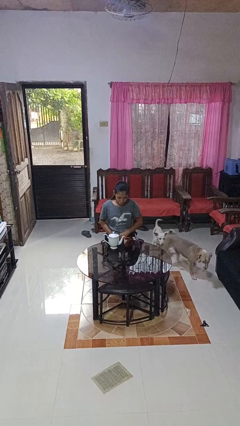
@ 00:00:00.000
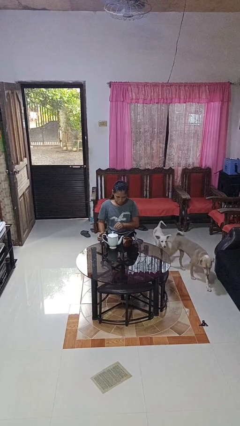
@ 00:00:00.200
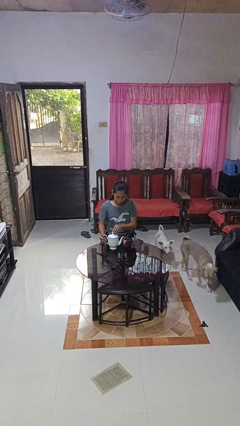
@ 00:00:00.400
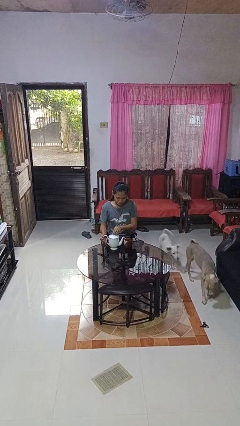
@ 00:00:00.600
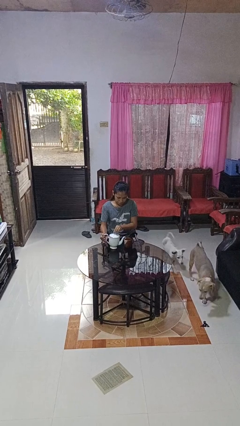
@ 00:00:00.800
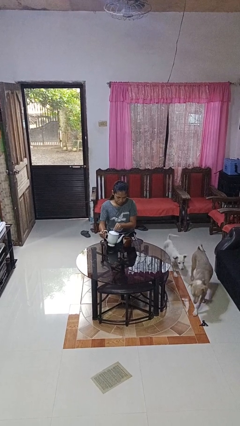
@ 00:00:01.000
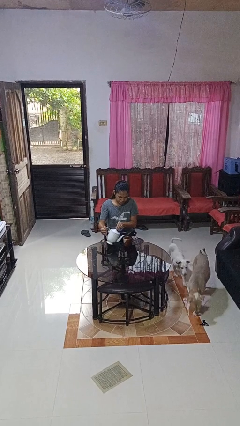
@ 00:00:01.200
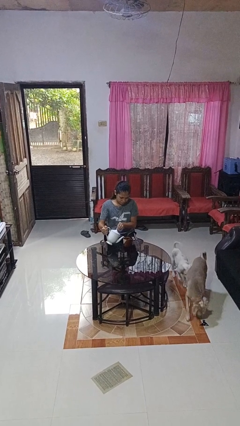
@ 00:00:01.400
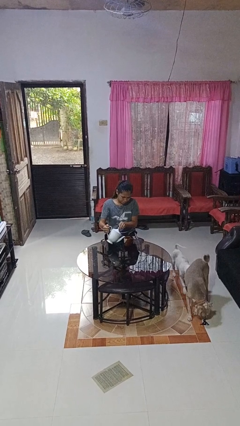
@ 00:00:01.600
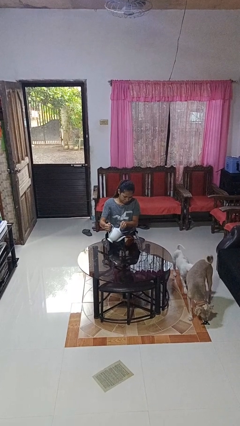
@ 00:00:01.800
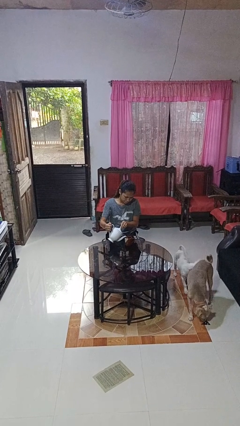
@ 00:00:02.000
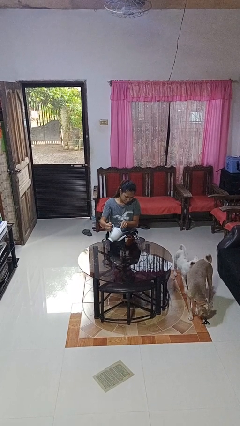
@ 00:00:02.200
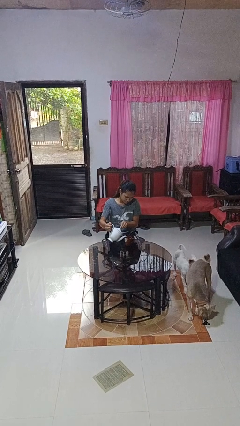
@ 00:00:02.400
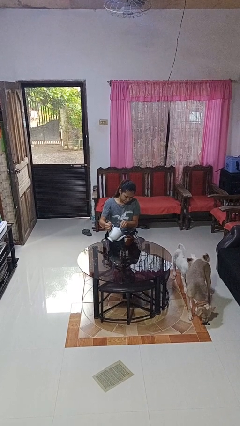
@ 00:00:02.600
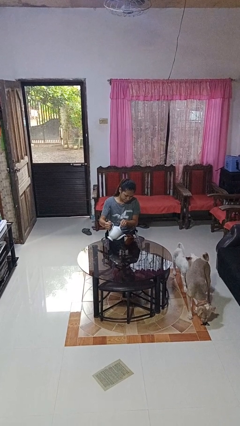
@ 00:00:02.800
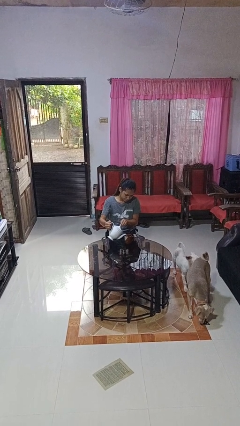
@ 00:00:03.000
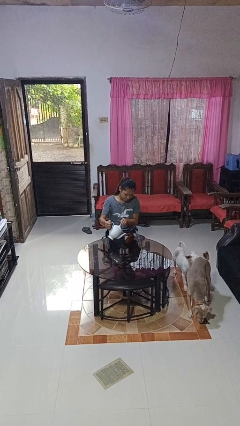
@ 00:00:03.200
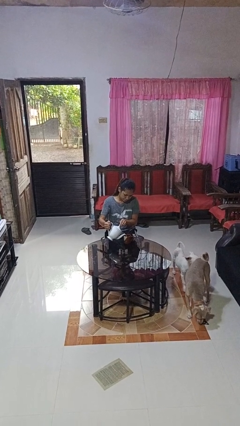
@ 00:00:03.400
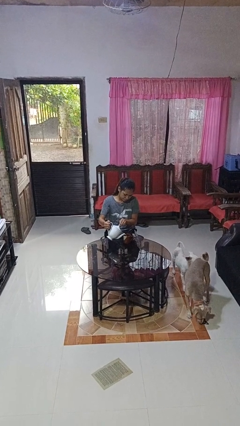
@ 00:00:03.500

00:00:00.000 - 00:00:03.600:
person pours coffee into mug

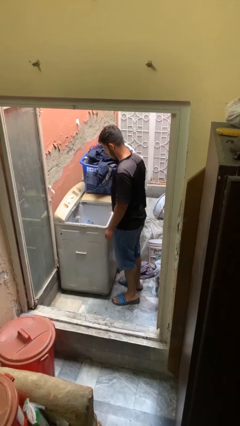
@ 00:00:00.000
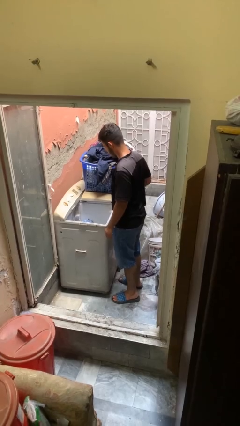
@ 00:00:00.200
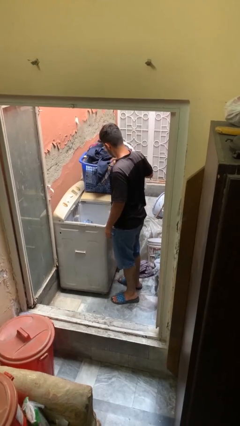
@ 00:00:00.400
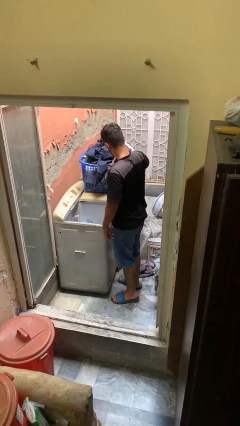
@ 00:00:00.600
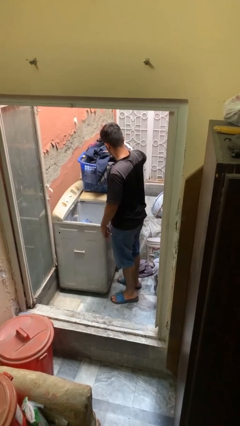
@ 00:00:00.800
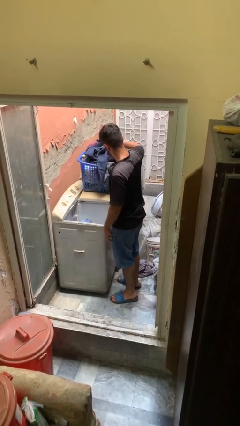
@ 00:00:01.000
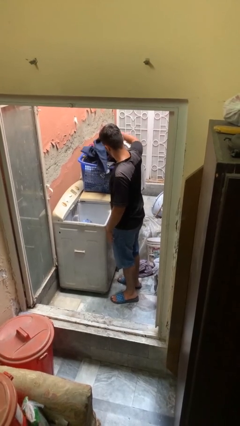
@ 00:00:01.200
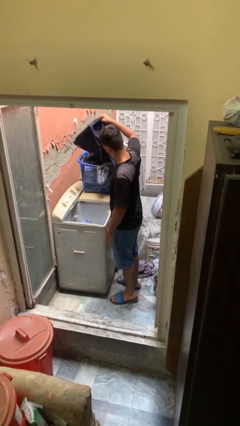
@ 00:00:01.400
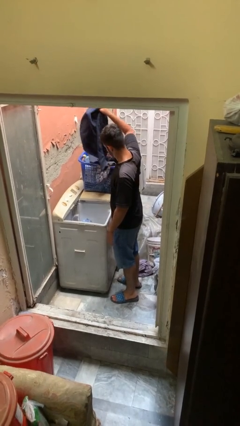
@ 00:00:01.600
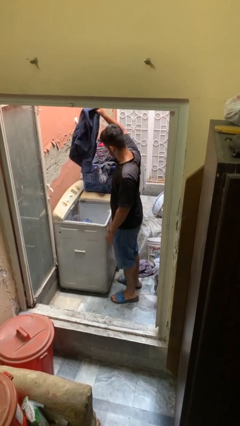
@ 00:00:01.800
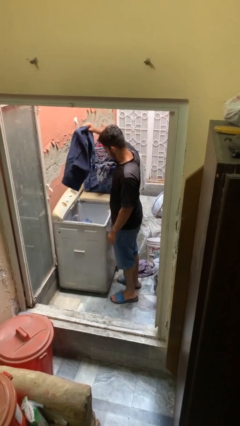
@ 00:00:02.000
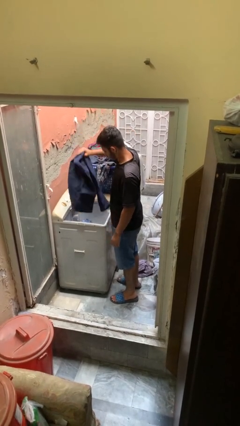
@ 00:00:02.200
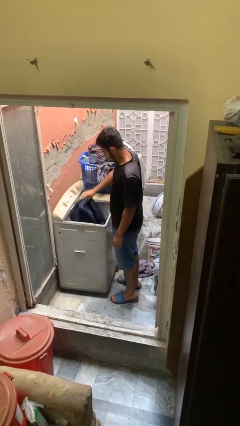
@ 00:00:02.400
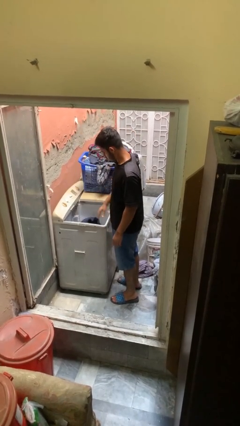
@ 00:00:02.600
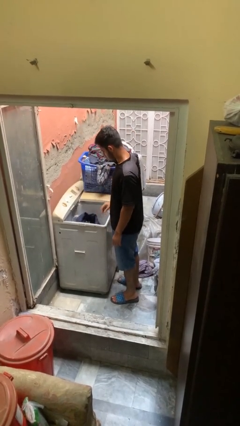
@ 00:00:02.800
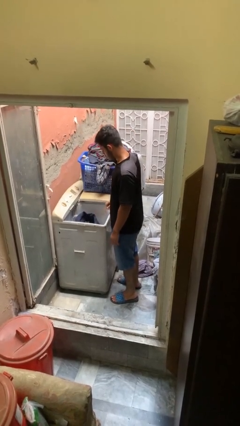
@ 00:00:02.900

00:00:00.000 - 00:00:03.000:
person loads clotheswasher

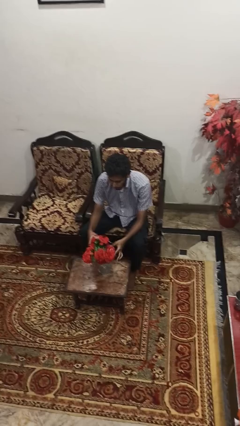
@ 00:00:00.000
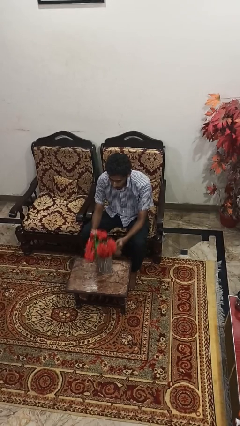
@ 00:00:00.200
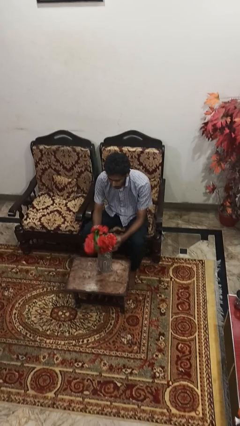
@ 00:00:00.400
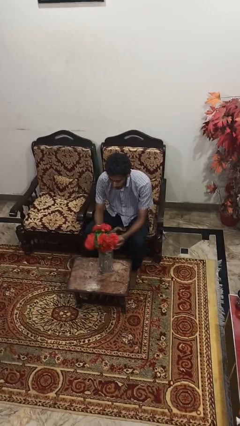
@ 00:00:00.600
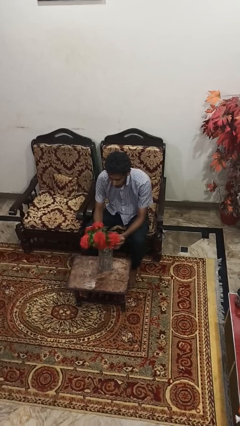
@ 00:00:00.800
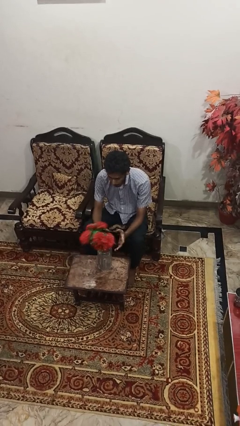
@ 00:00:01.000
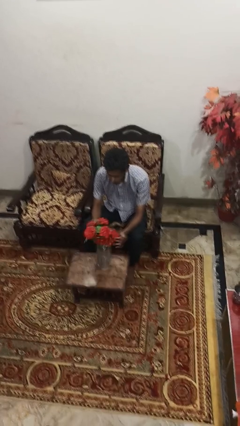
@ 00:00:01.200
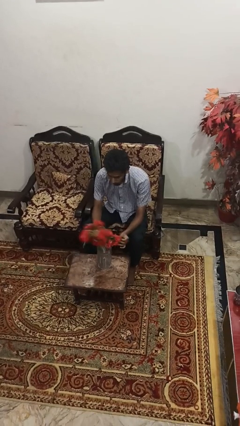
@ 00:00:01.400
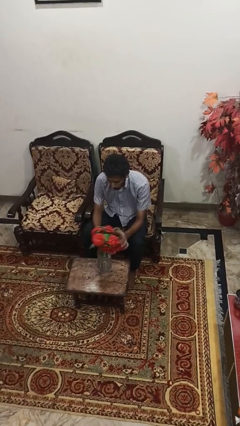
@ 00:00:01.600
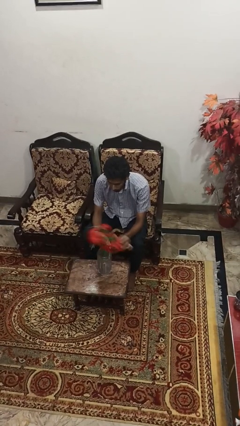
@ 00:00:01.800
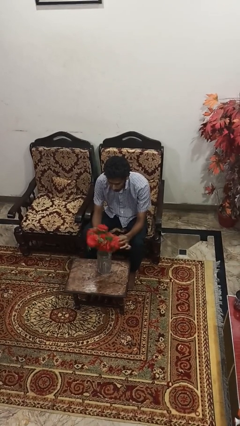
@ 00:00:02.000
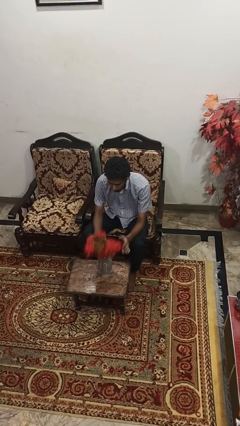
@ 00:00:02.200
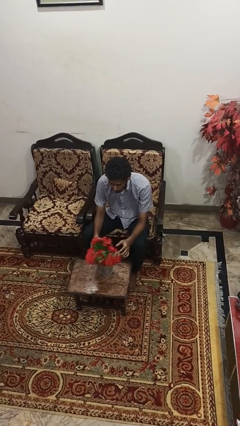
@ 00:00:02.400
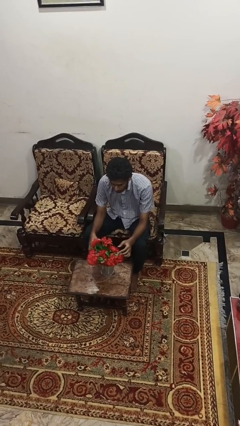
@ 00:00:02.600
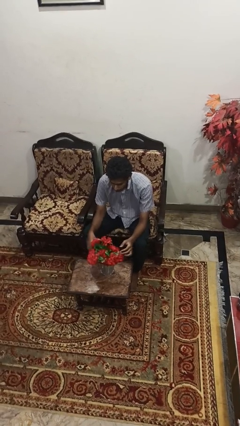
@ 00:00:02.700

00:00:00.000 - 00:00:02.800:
person arranges flowers in vase

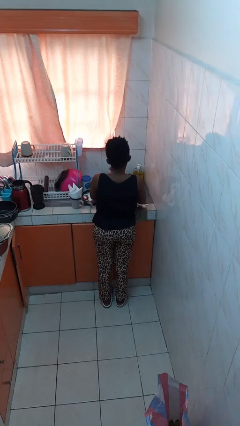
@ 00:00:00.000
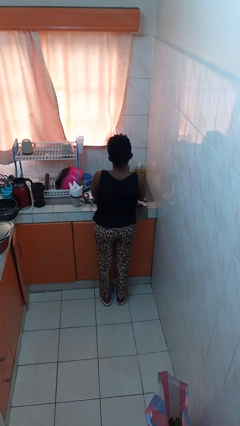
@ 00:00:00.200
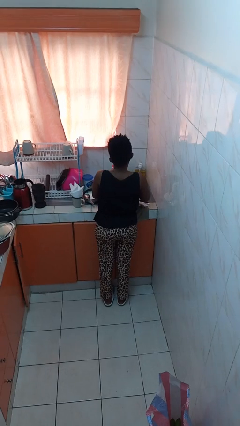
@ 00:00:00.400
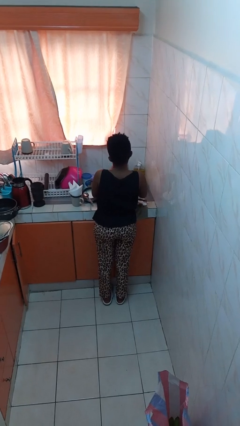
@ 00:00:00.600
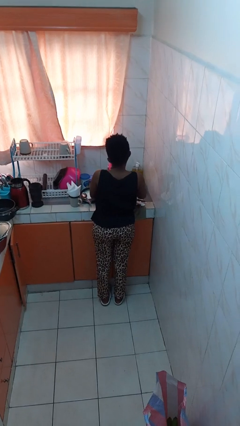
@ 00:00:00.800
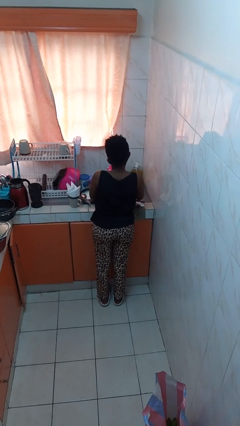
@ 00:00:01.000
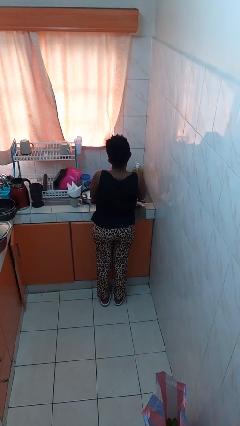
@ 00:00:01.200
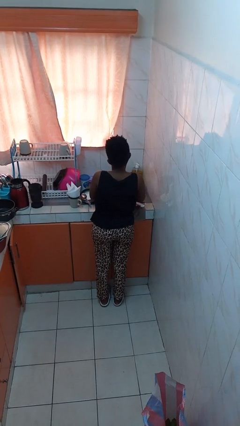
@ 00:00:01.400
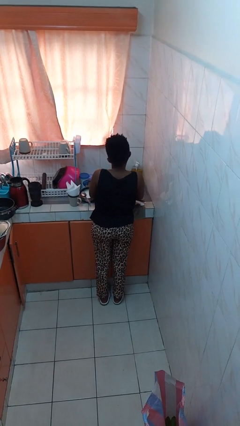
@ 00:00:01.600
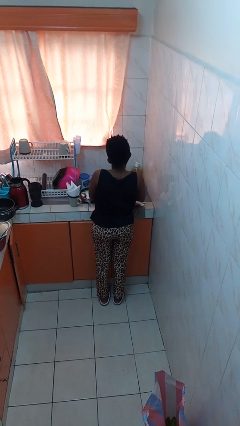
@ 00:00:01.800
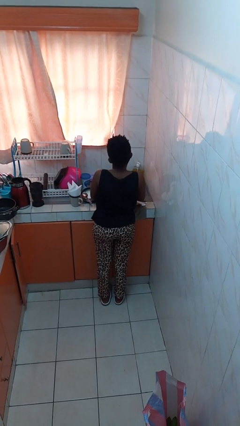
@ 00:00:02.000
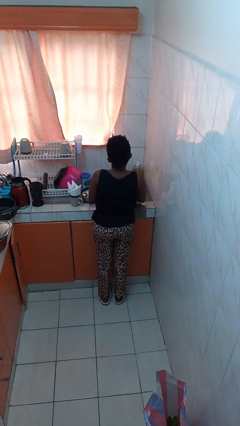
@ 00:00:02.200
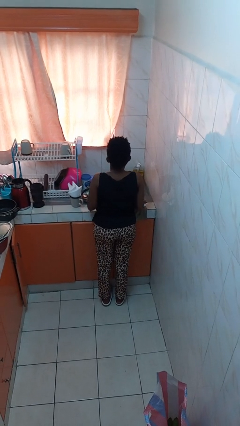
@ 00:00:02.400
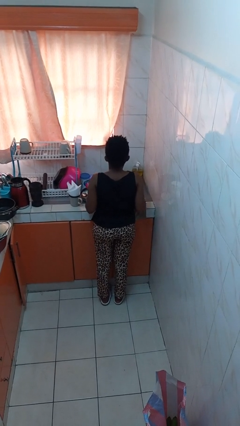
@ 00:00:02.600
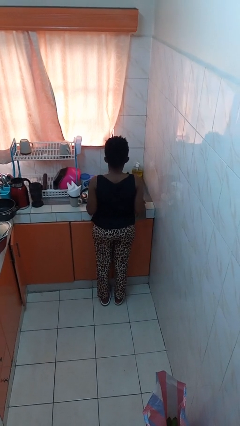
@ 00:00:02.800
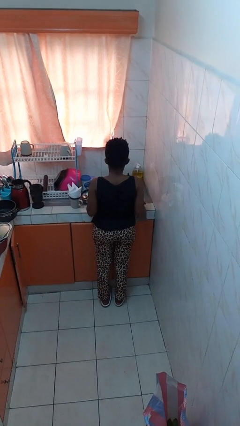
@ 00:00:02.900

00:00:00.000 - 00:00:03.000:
person washes dish

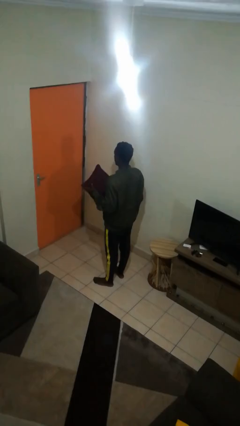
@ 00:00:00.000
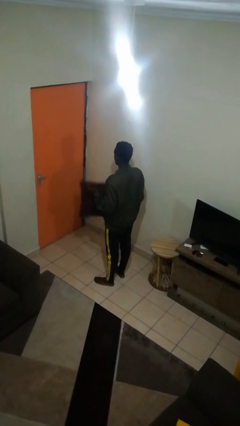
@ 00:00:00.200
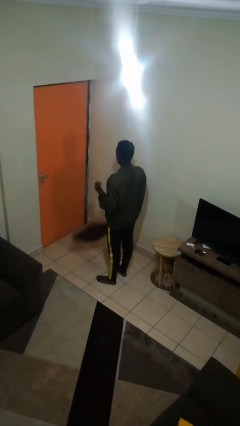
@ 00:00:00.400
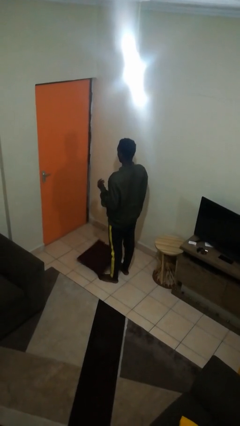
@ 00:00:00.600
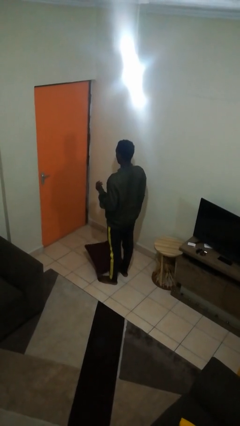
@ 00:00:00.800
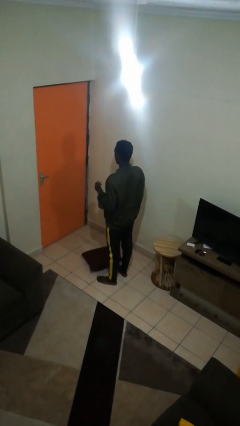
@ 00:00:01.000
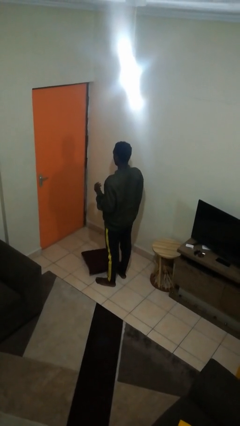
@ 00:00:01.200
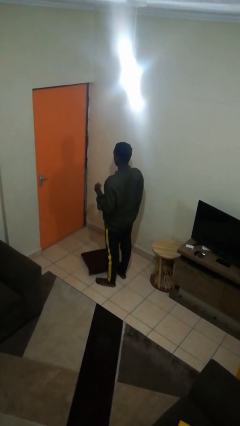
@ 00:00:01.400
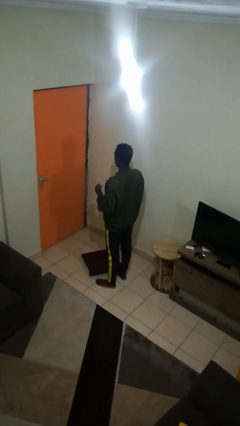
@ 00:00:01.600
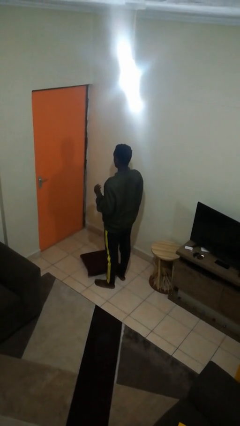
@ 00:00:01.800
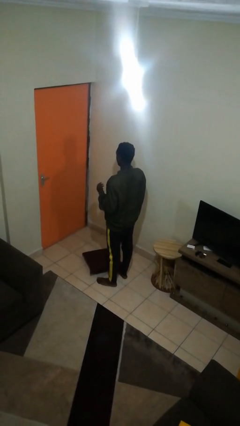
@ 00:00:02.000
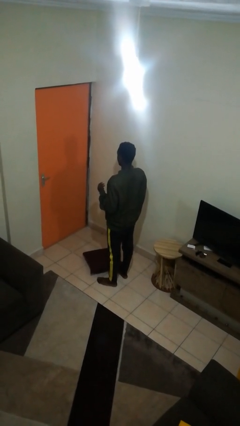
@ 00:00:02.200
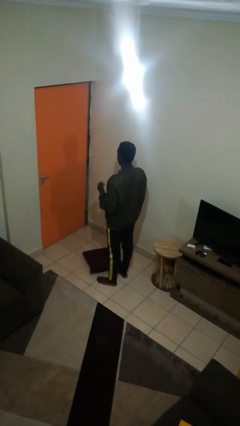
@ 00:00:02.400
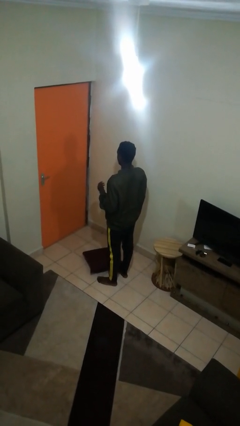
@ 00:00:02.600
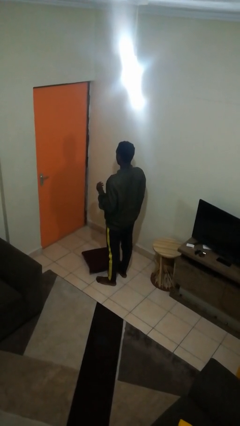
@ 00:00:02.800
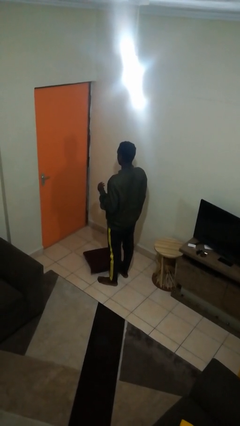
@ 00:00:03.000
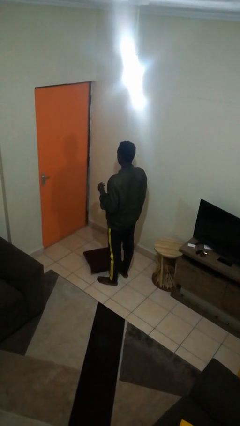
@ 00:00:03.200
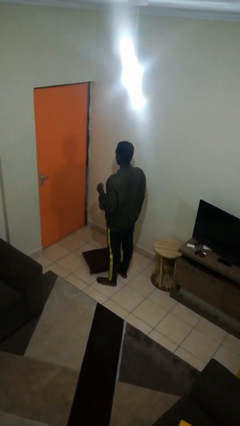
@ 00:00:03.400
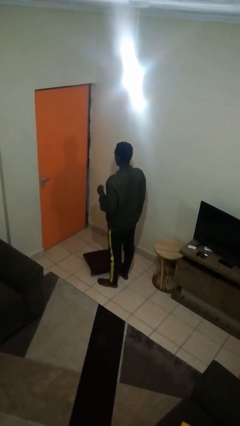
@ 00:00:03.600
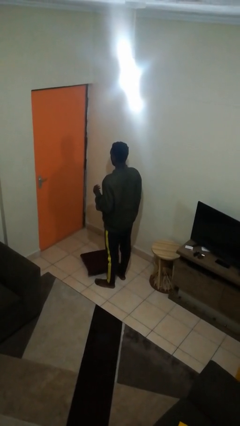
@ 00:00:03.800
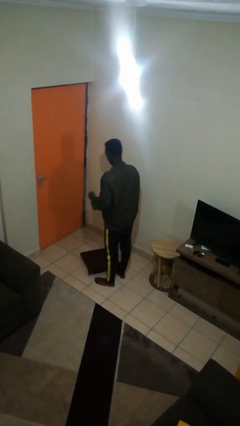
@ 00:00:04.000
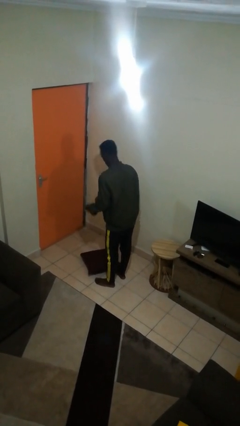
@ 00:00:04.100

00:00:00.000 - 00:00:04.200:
person drops object

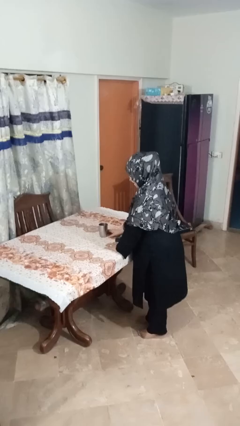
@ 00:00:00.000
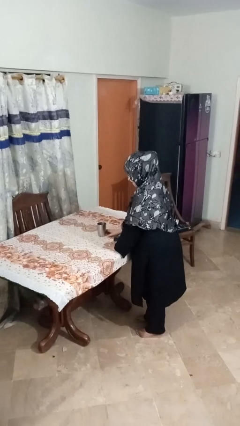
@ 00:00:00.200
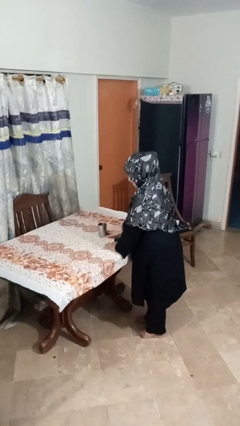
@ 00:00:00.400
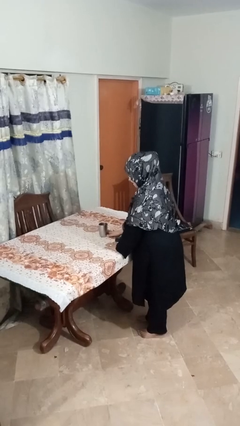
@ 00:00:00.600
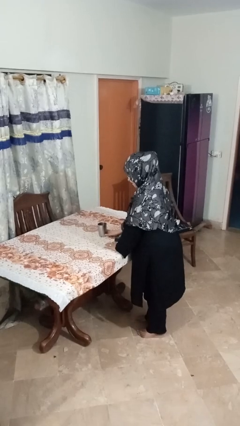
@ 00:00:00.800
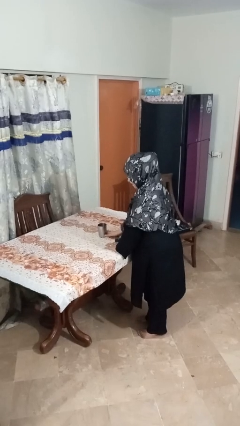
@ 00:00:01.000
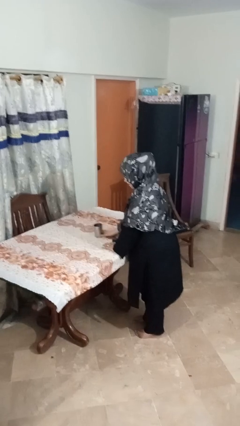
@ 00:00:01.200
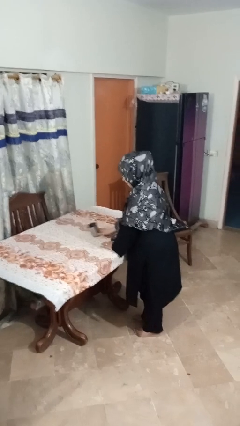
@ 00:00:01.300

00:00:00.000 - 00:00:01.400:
person sets upright glass
